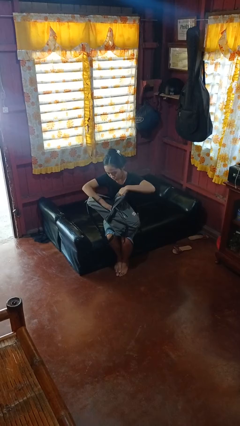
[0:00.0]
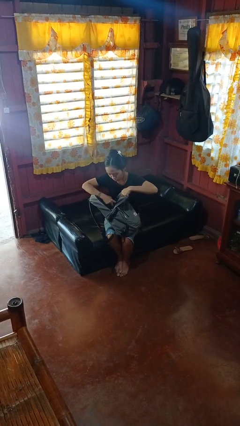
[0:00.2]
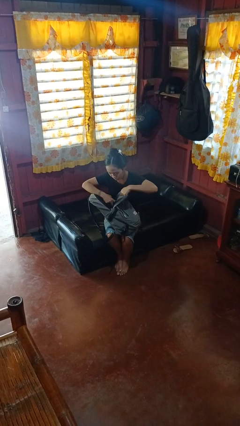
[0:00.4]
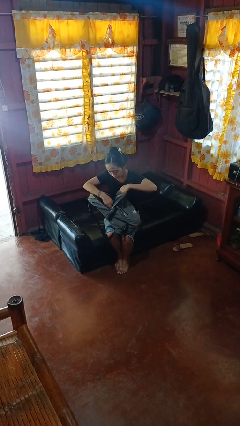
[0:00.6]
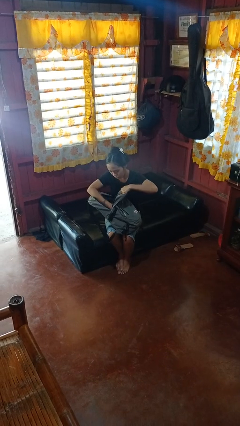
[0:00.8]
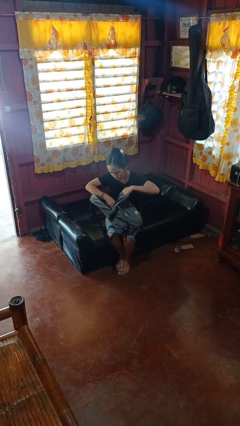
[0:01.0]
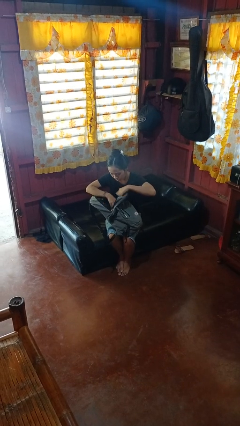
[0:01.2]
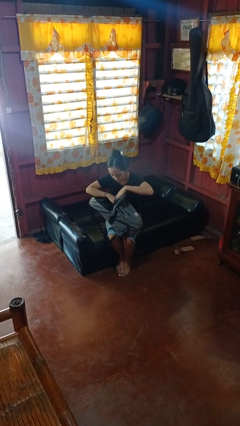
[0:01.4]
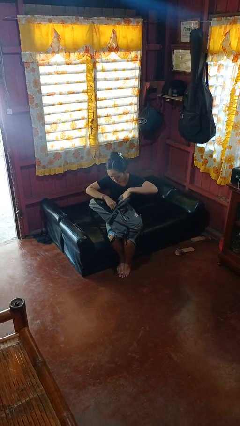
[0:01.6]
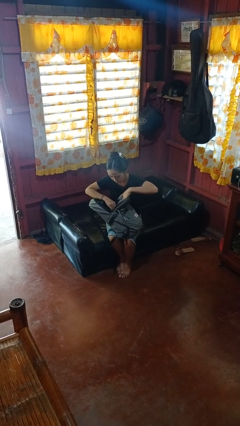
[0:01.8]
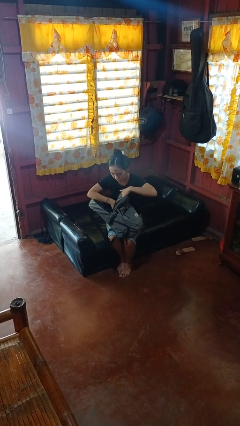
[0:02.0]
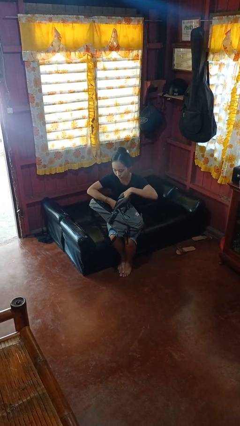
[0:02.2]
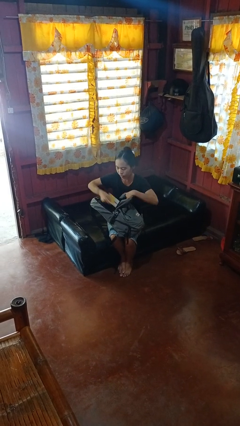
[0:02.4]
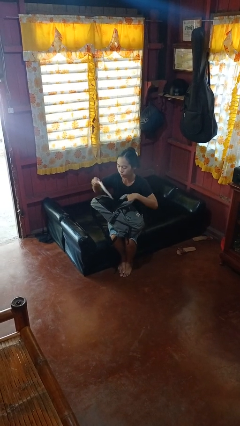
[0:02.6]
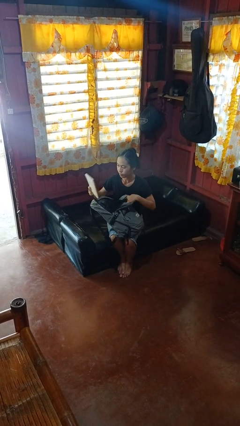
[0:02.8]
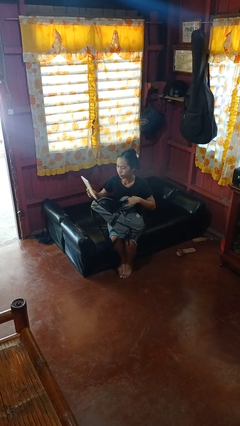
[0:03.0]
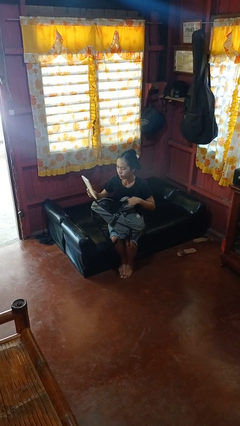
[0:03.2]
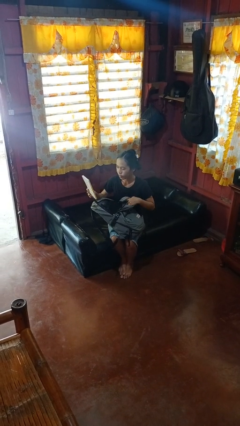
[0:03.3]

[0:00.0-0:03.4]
person searches in backpack

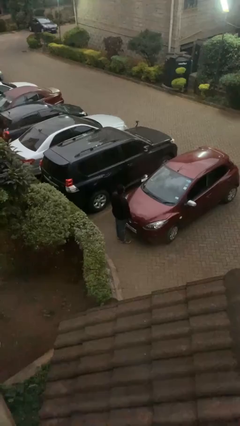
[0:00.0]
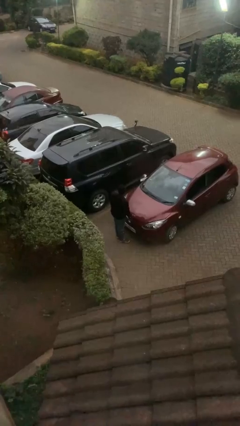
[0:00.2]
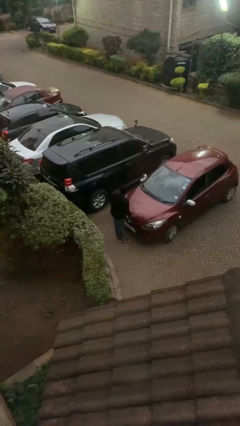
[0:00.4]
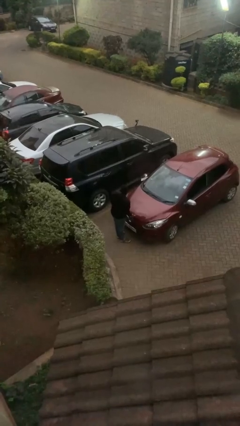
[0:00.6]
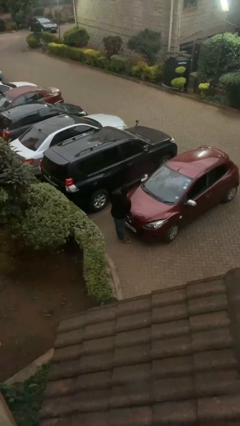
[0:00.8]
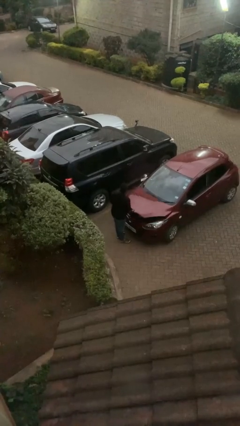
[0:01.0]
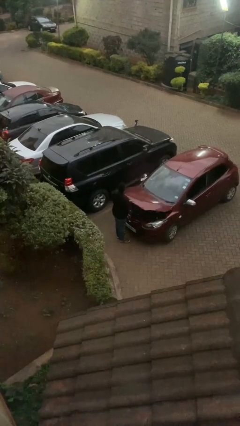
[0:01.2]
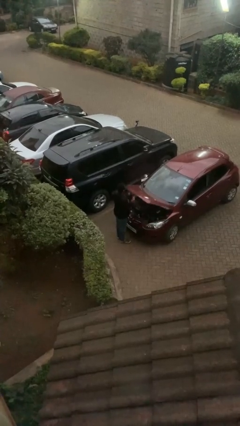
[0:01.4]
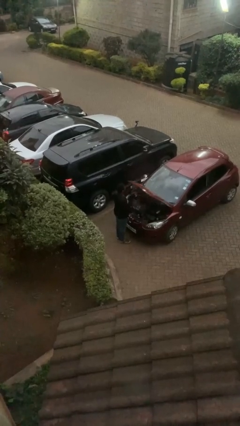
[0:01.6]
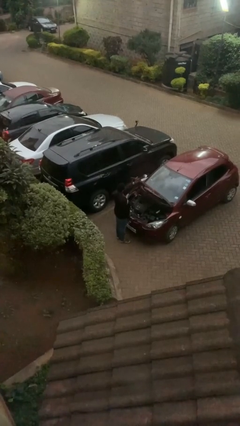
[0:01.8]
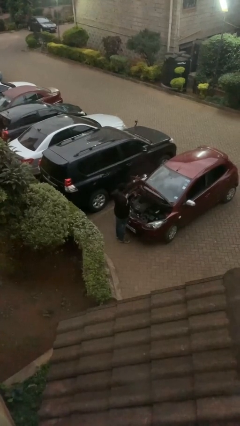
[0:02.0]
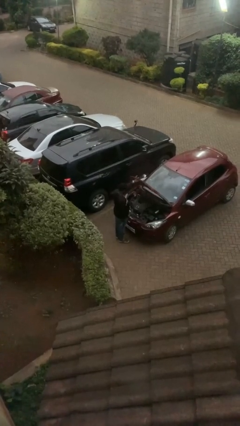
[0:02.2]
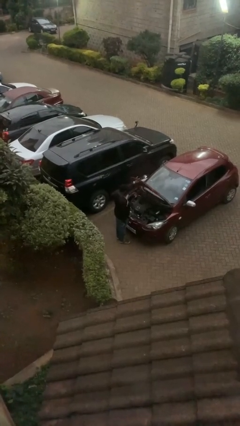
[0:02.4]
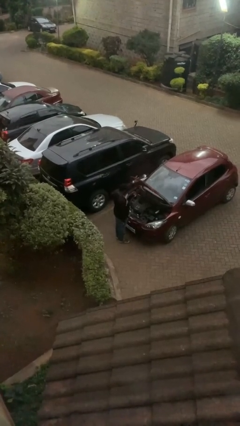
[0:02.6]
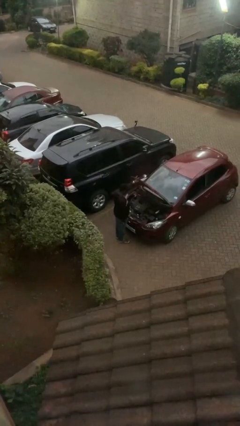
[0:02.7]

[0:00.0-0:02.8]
person opens car hood

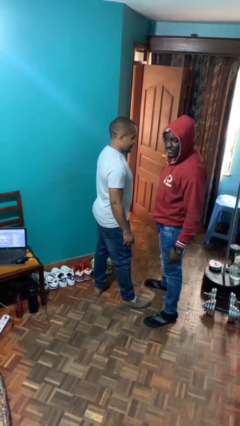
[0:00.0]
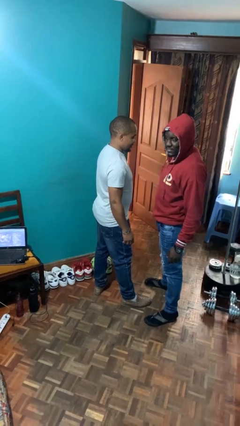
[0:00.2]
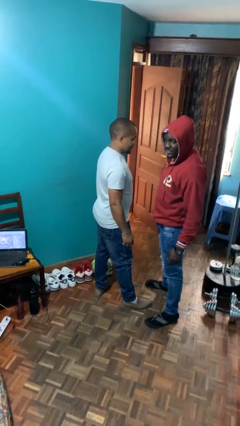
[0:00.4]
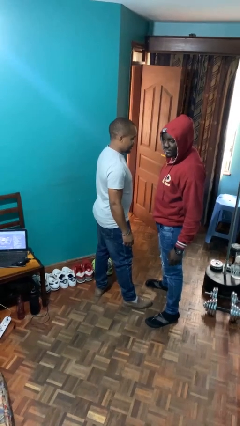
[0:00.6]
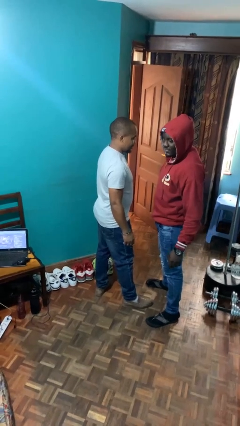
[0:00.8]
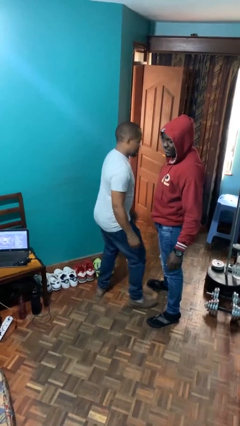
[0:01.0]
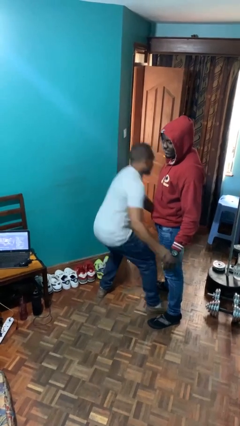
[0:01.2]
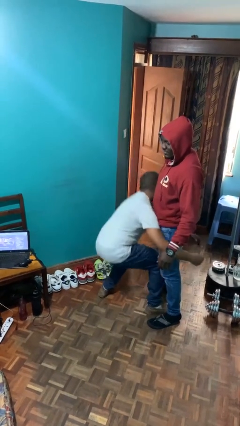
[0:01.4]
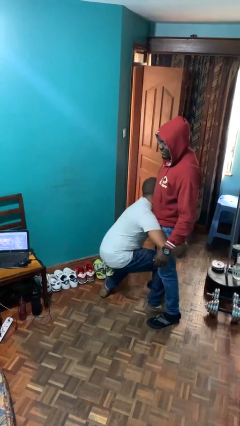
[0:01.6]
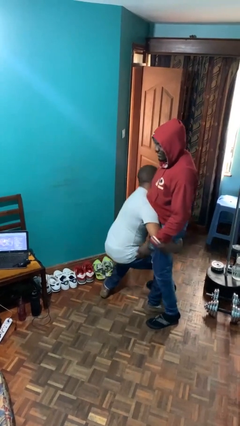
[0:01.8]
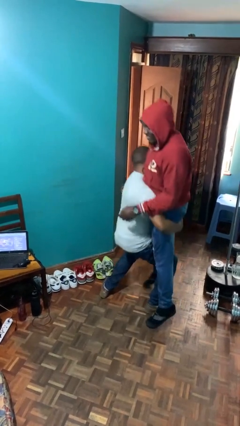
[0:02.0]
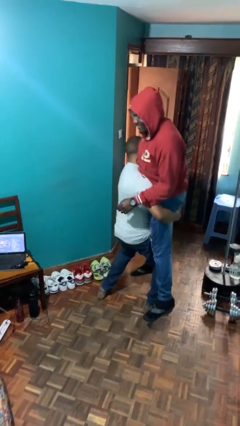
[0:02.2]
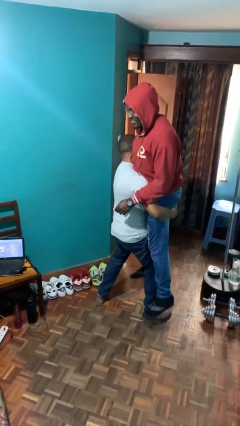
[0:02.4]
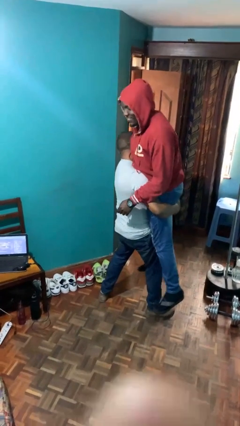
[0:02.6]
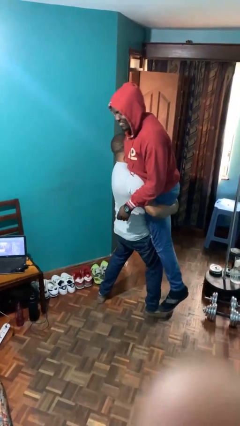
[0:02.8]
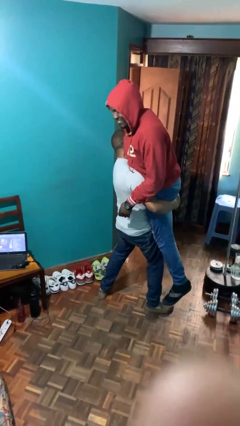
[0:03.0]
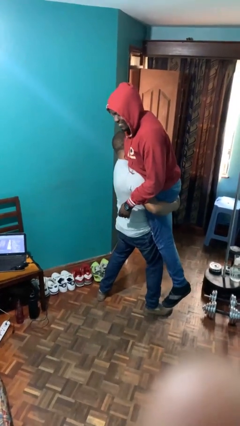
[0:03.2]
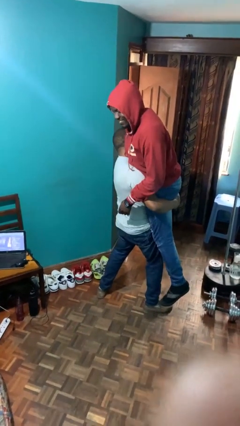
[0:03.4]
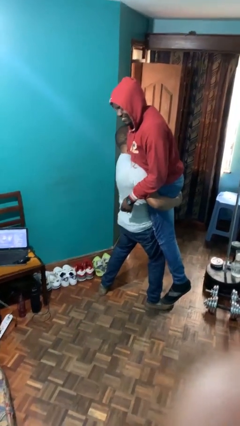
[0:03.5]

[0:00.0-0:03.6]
person picks up person

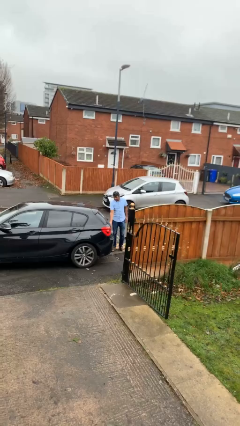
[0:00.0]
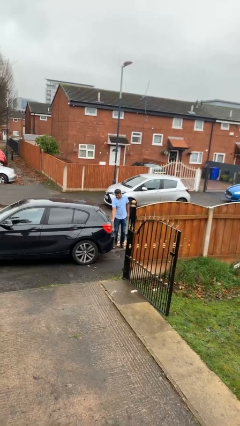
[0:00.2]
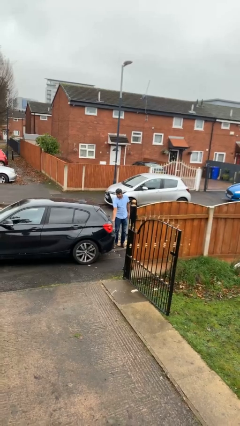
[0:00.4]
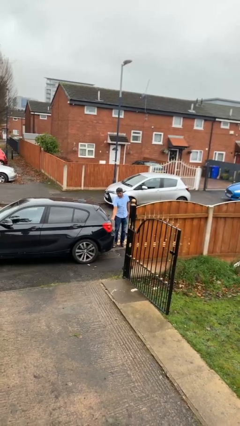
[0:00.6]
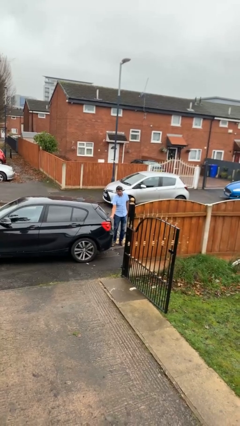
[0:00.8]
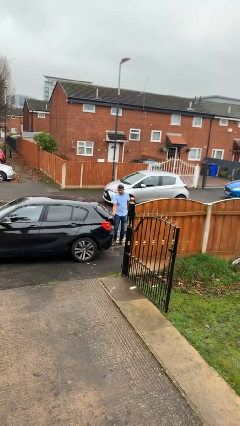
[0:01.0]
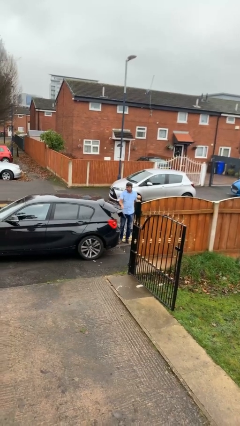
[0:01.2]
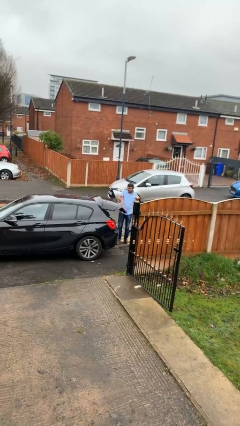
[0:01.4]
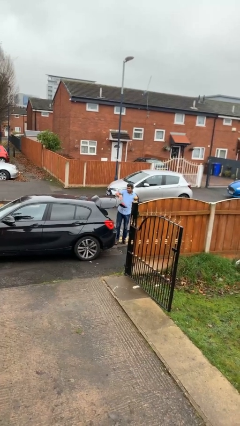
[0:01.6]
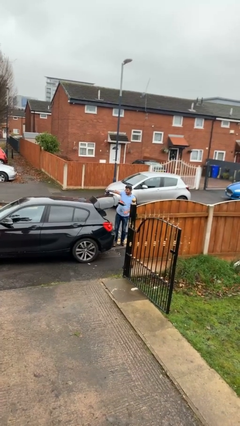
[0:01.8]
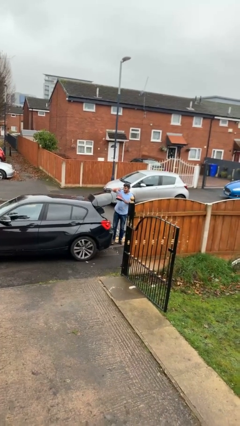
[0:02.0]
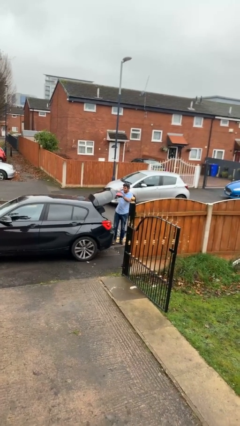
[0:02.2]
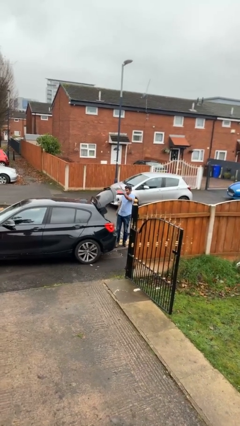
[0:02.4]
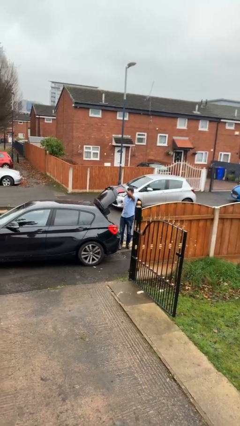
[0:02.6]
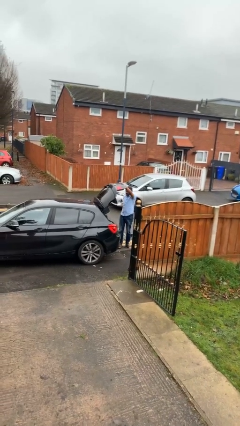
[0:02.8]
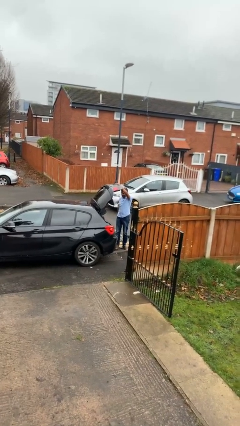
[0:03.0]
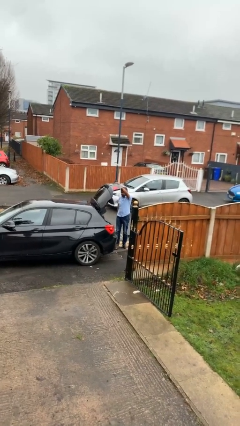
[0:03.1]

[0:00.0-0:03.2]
person opens car trunk

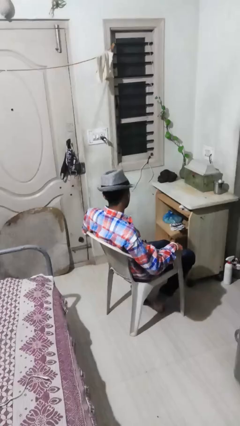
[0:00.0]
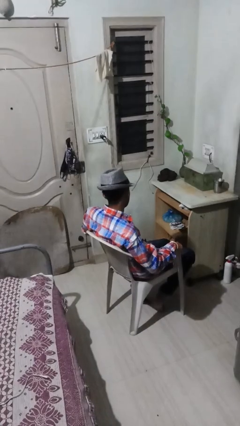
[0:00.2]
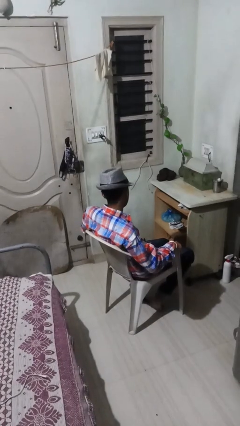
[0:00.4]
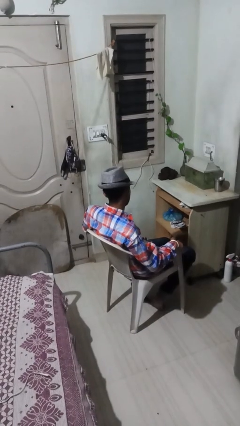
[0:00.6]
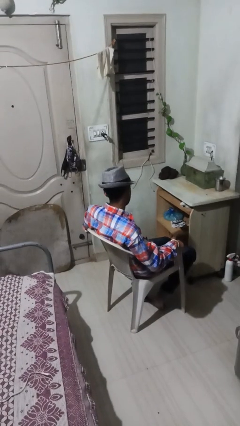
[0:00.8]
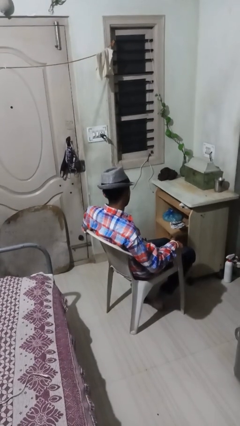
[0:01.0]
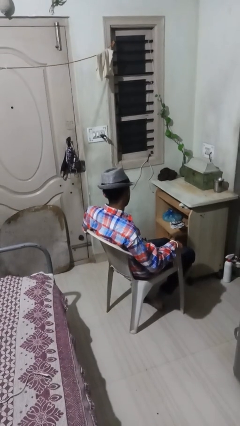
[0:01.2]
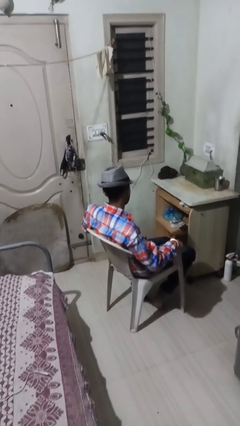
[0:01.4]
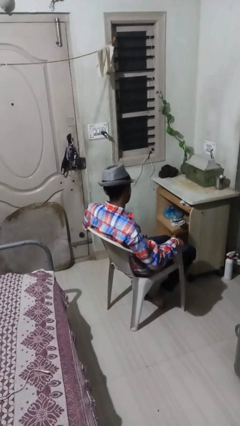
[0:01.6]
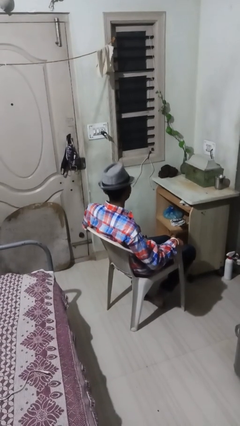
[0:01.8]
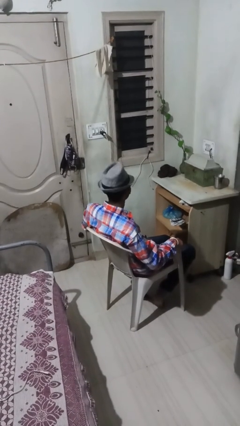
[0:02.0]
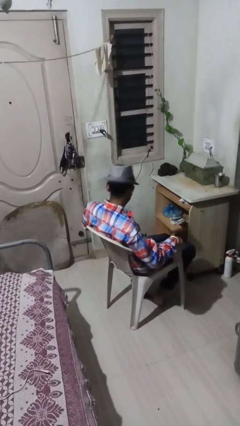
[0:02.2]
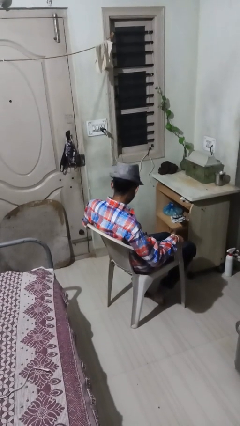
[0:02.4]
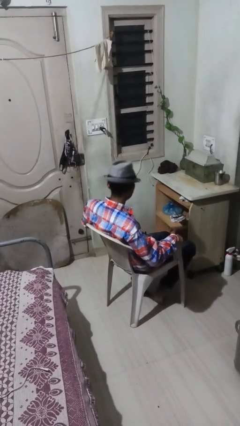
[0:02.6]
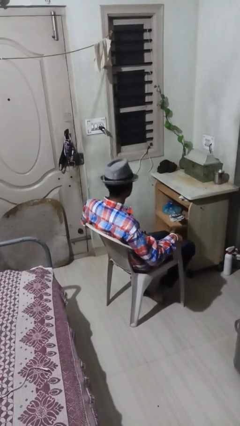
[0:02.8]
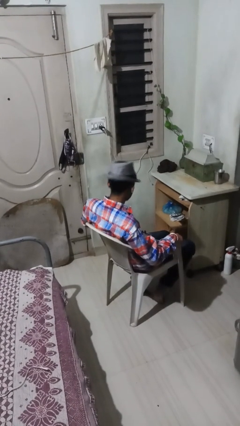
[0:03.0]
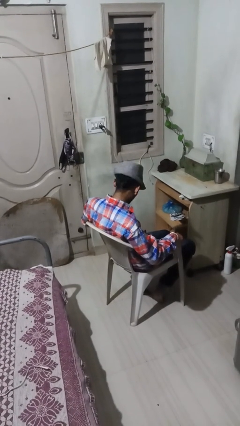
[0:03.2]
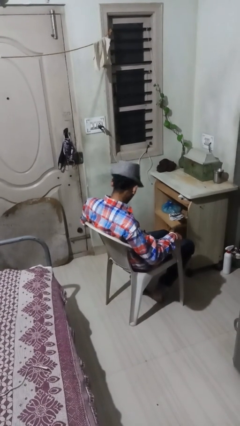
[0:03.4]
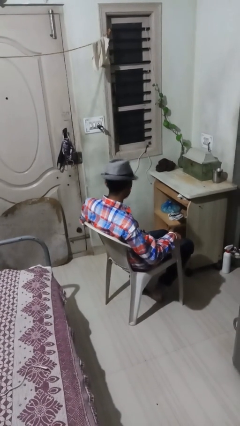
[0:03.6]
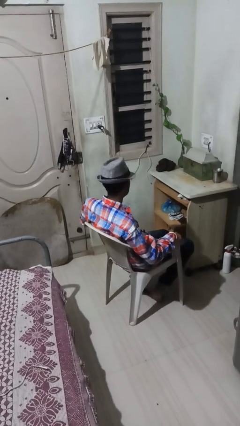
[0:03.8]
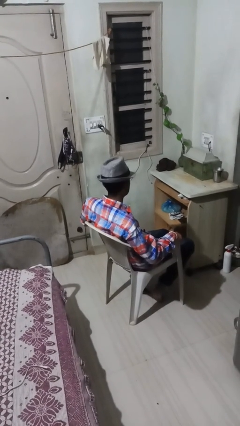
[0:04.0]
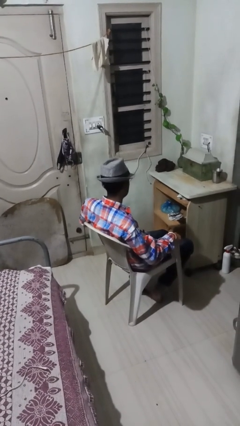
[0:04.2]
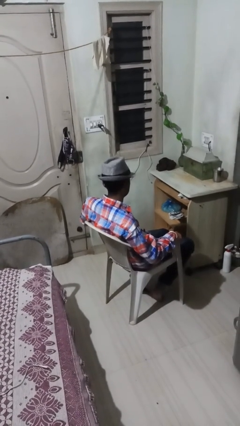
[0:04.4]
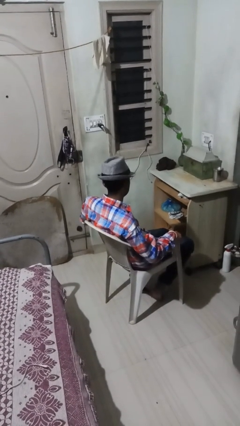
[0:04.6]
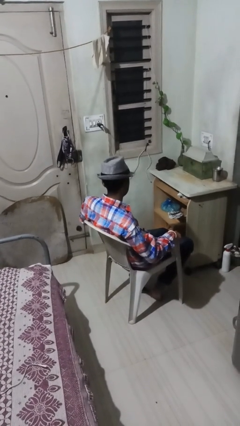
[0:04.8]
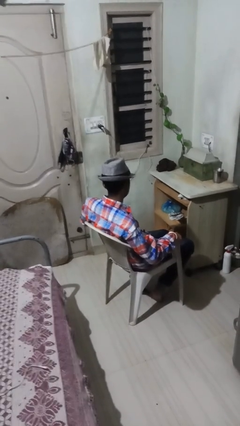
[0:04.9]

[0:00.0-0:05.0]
person nods head
